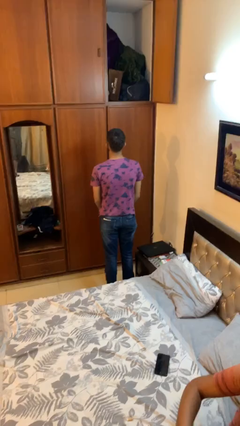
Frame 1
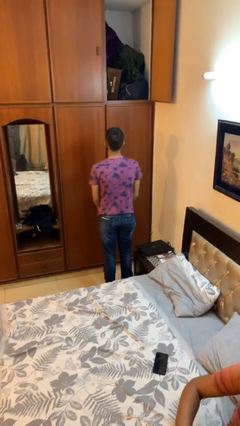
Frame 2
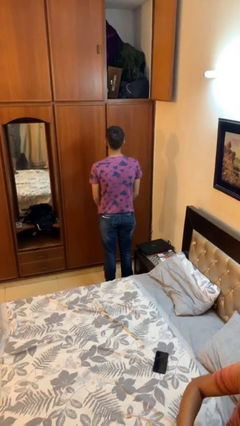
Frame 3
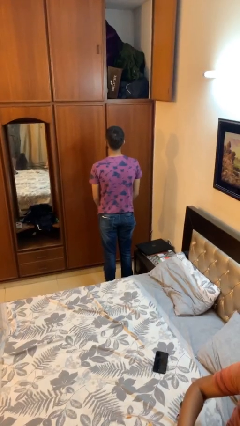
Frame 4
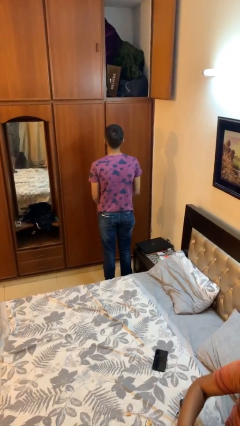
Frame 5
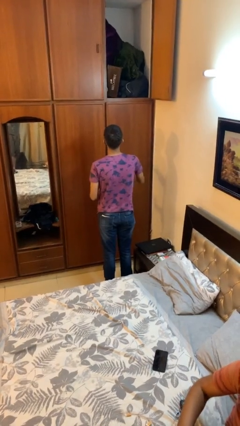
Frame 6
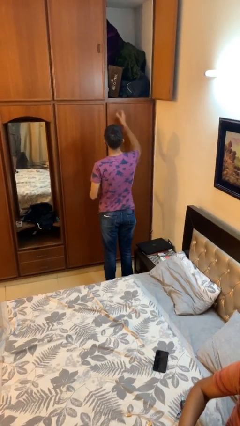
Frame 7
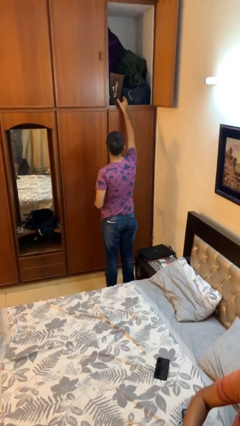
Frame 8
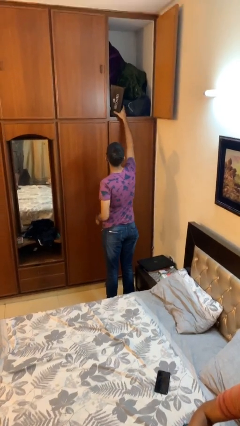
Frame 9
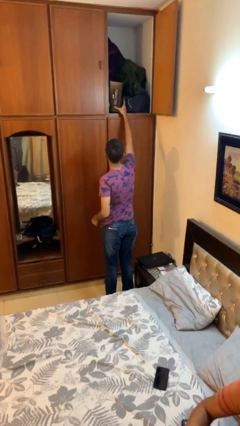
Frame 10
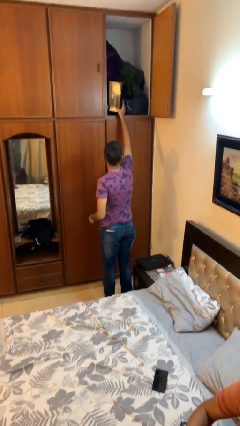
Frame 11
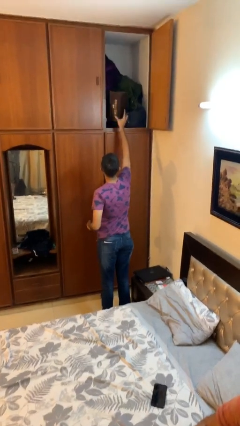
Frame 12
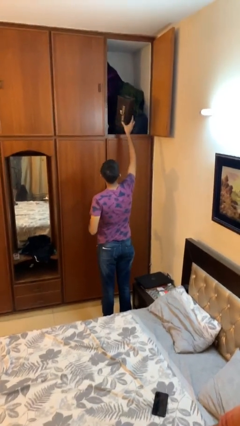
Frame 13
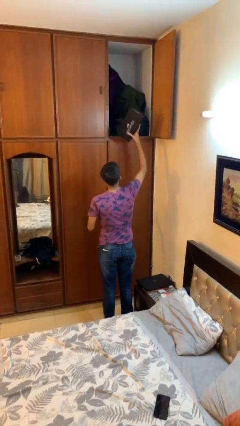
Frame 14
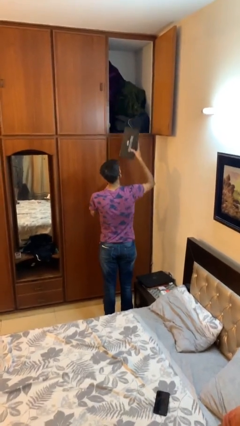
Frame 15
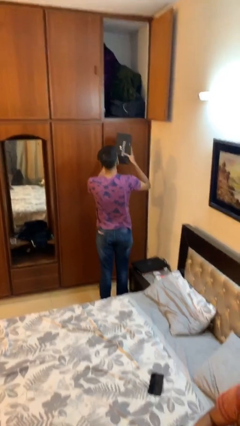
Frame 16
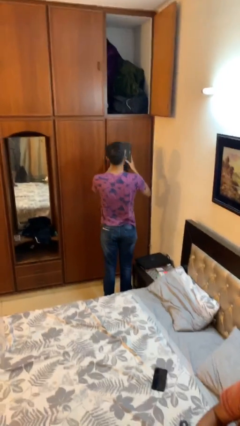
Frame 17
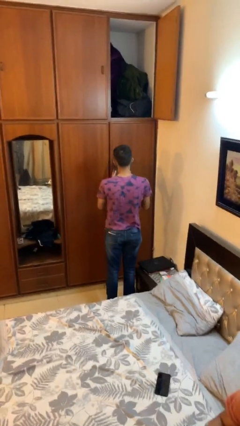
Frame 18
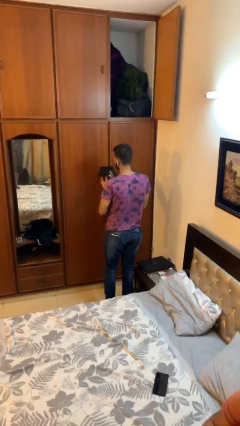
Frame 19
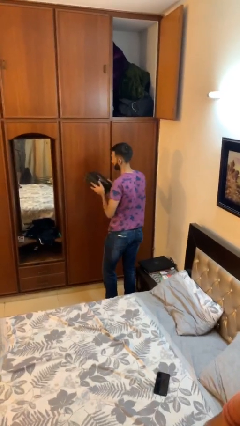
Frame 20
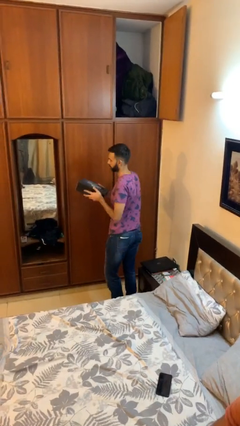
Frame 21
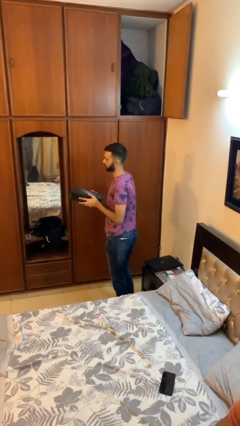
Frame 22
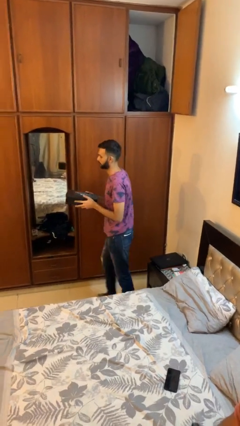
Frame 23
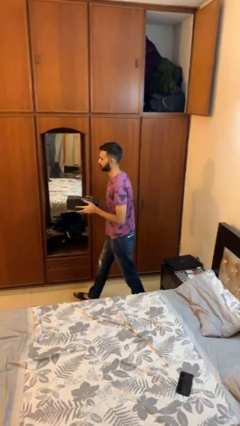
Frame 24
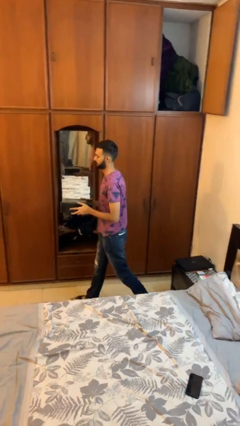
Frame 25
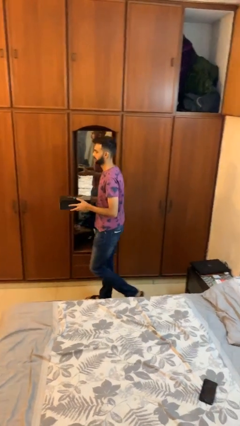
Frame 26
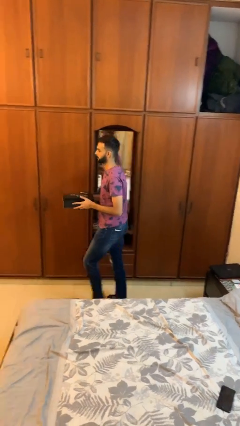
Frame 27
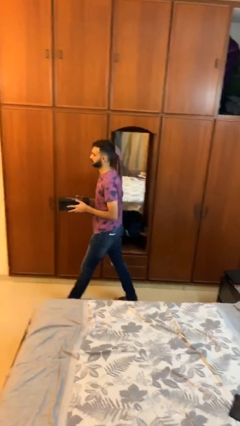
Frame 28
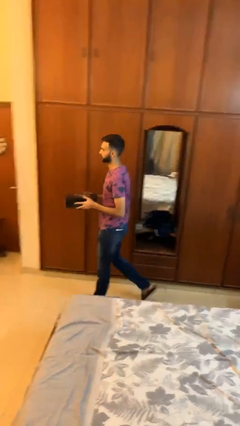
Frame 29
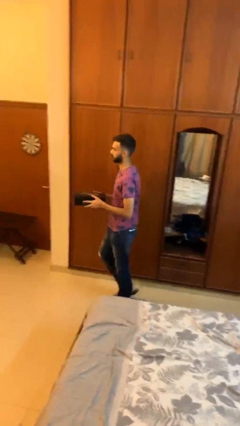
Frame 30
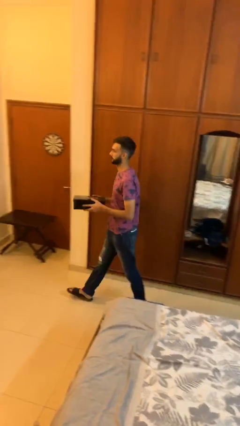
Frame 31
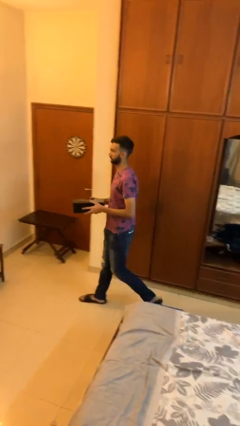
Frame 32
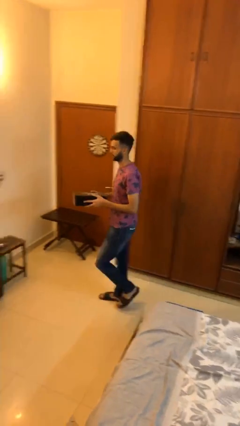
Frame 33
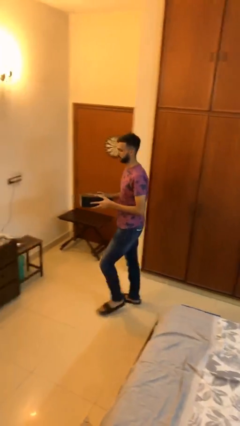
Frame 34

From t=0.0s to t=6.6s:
person picks up object from shelf

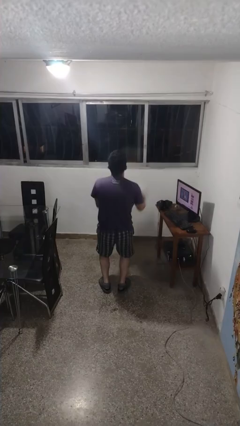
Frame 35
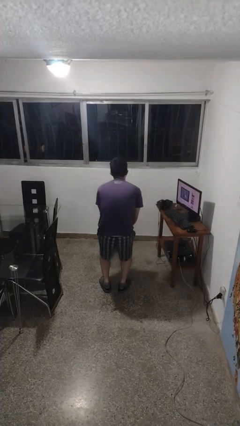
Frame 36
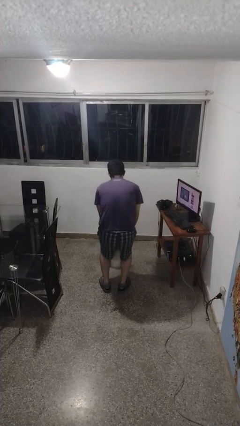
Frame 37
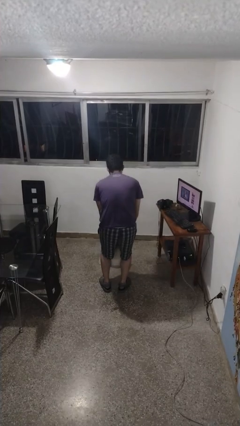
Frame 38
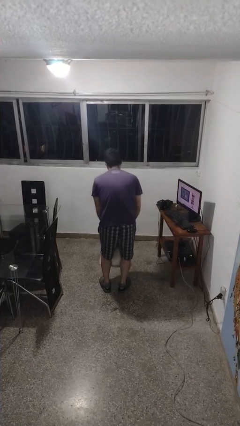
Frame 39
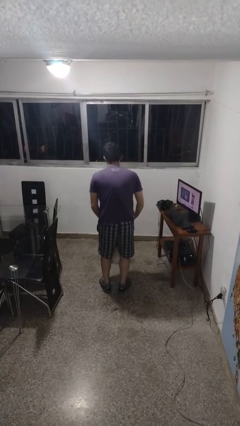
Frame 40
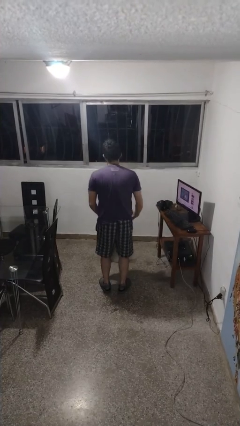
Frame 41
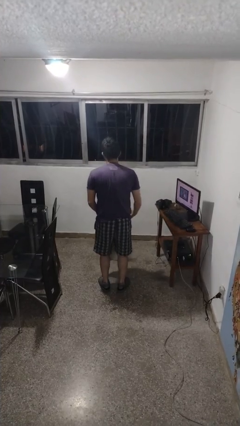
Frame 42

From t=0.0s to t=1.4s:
person catches dropped object

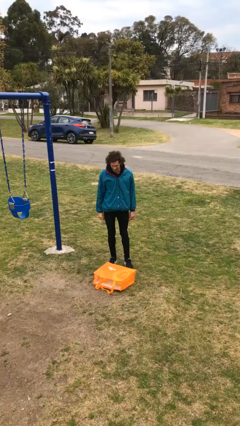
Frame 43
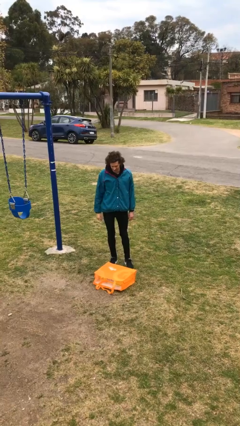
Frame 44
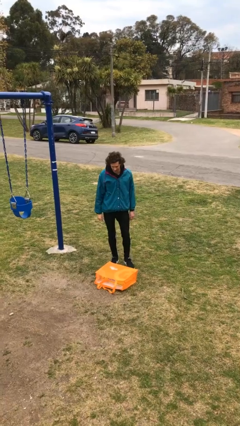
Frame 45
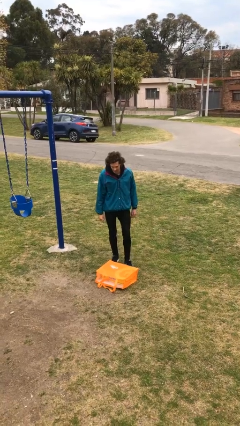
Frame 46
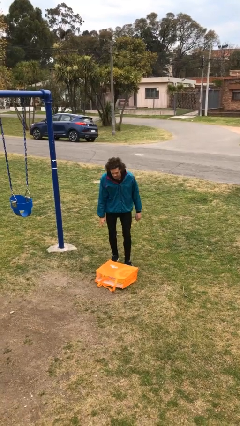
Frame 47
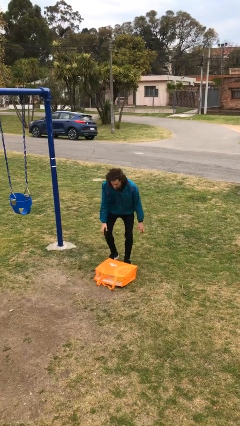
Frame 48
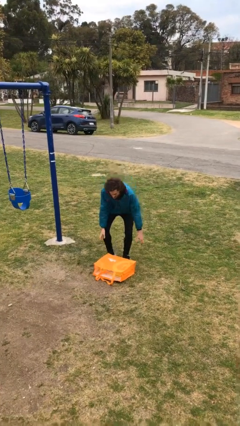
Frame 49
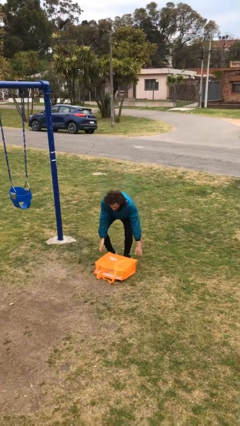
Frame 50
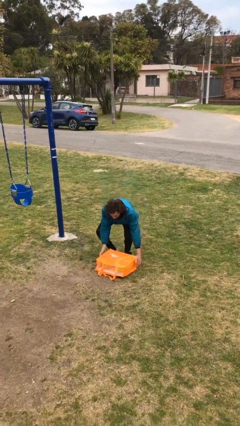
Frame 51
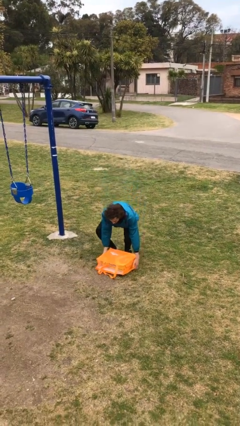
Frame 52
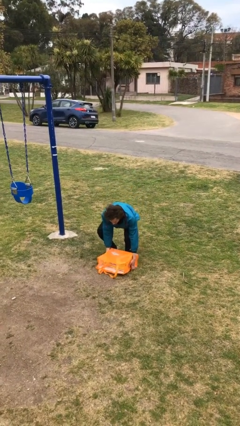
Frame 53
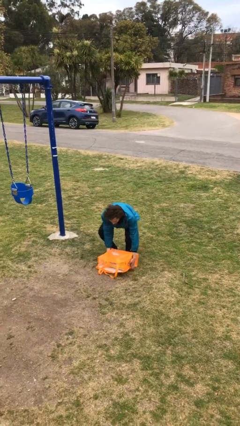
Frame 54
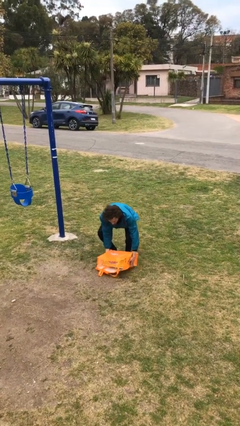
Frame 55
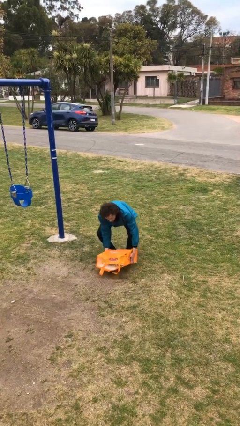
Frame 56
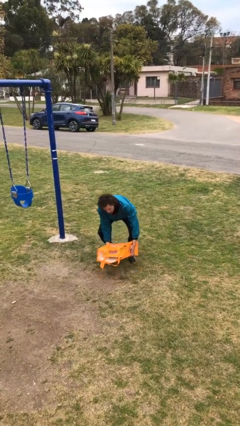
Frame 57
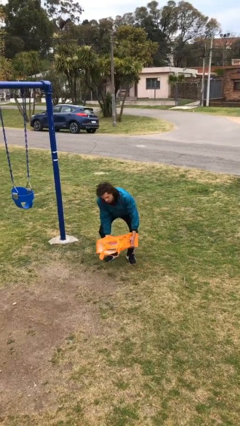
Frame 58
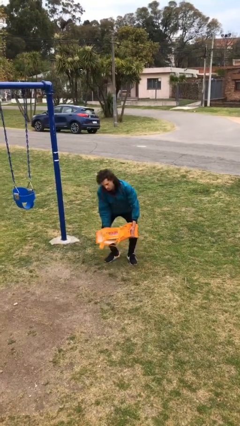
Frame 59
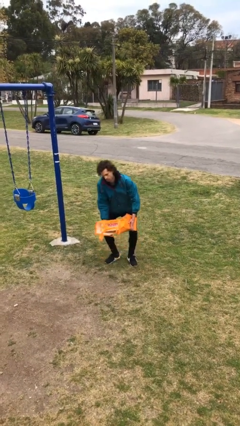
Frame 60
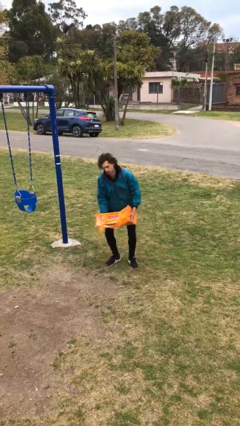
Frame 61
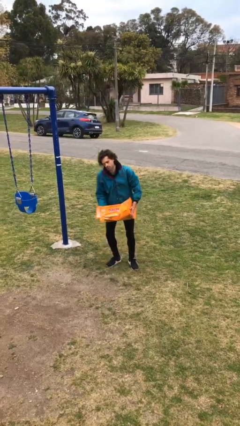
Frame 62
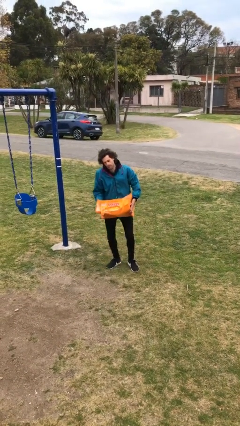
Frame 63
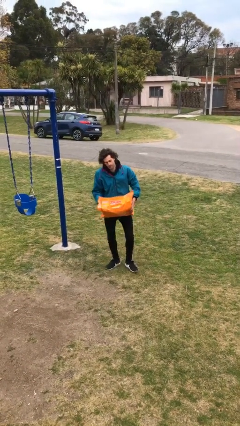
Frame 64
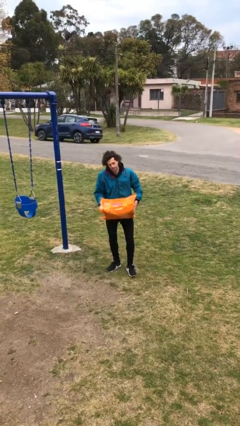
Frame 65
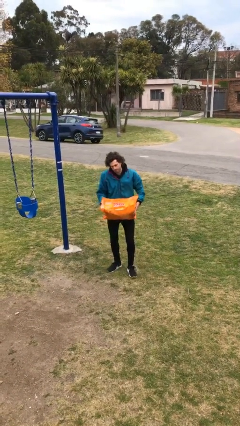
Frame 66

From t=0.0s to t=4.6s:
person picks up object from floor

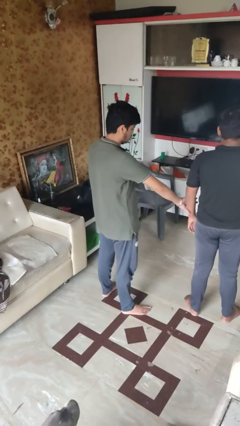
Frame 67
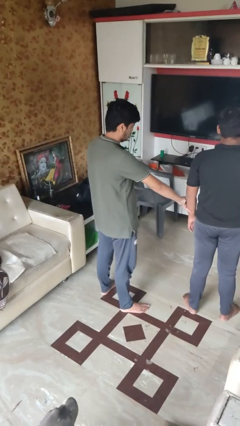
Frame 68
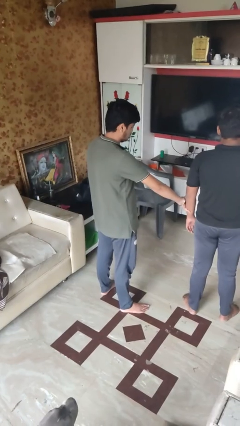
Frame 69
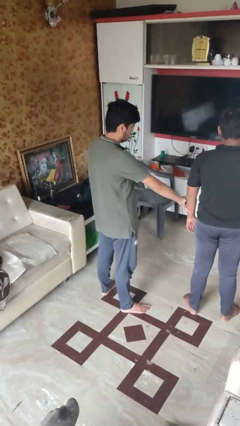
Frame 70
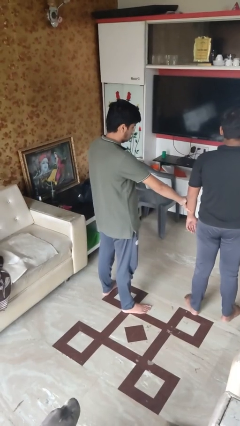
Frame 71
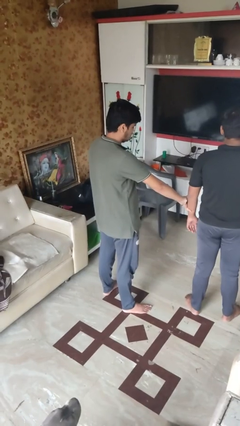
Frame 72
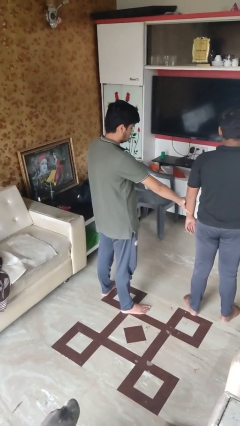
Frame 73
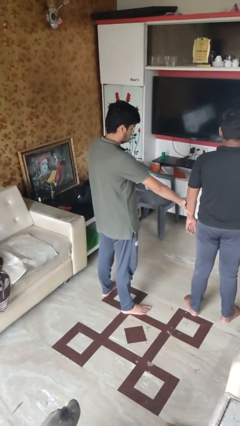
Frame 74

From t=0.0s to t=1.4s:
person grabs person by forearm

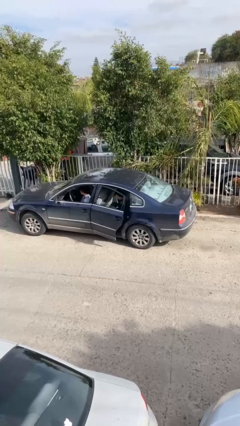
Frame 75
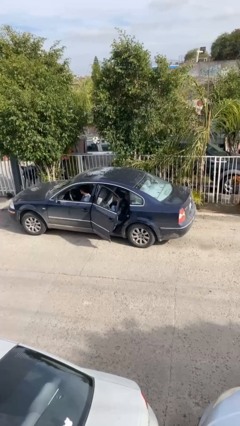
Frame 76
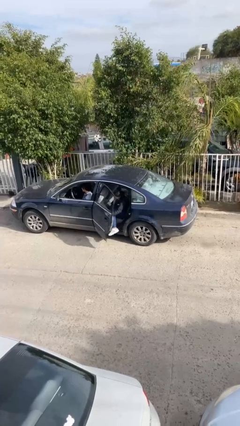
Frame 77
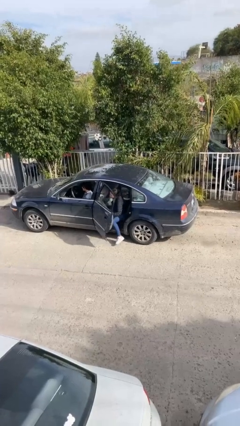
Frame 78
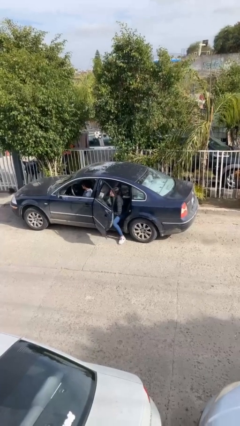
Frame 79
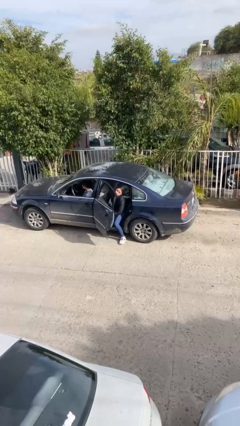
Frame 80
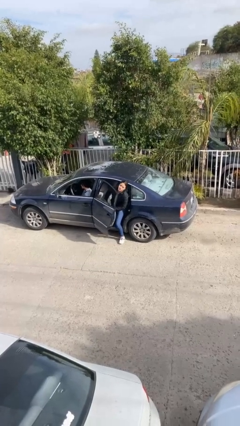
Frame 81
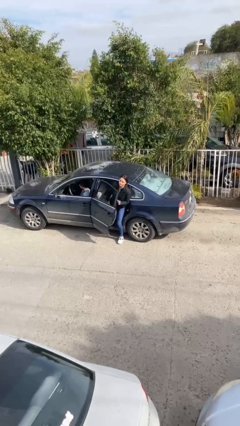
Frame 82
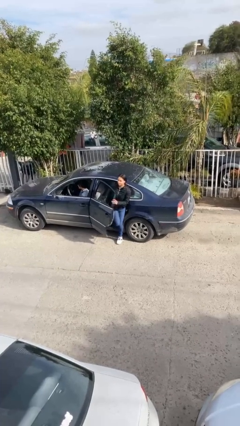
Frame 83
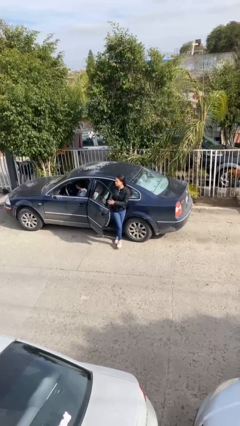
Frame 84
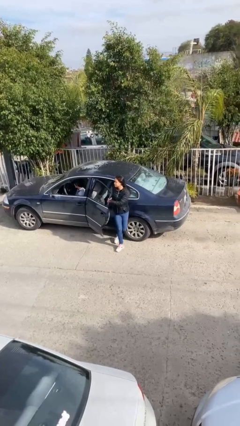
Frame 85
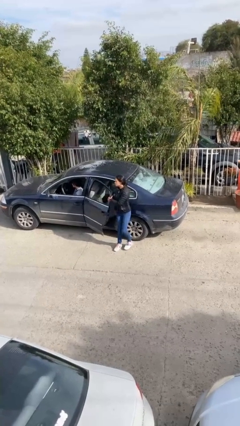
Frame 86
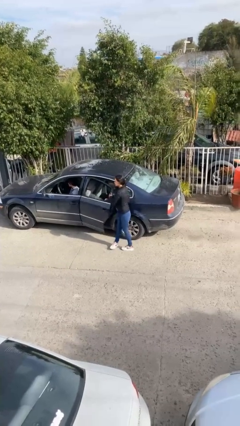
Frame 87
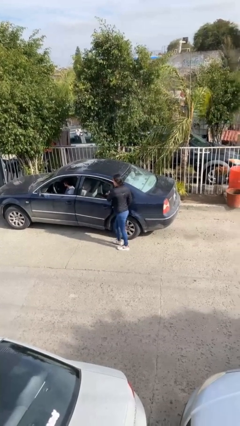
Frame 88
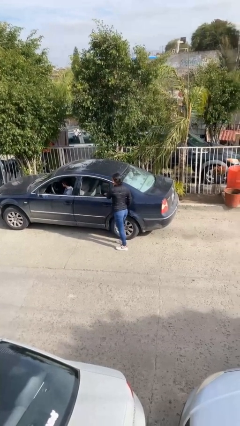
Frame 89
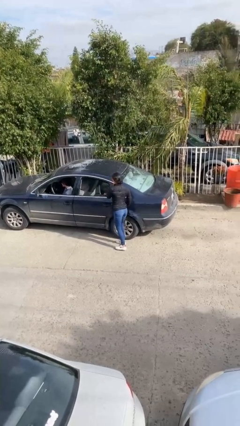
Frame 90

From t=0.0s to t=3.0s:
car drops off person

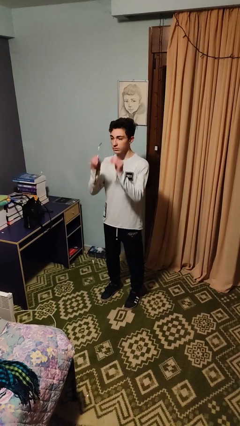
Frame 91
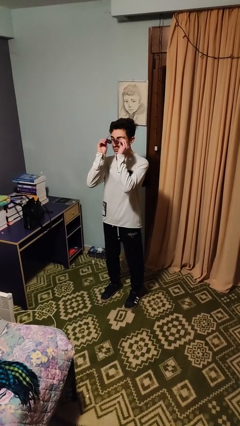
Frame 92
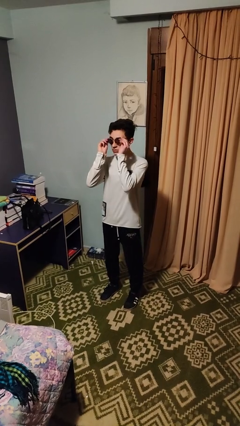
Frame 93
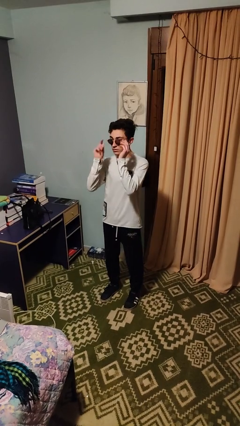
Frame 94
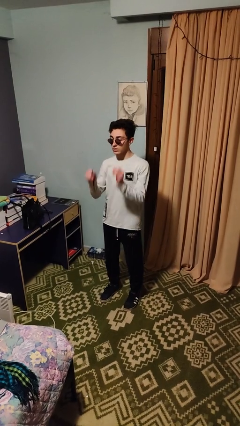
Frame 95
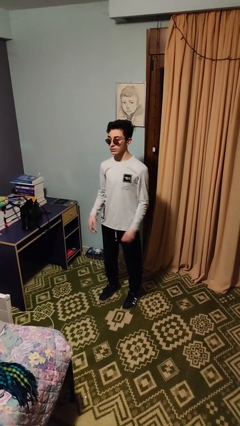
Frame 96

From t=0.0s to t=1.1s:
person puts on sunglasses
